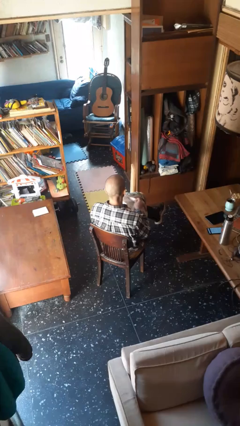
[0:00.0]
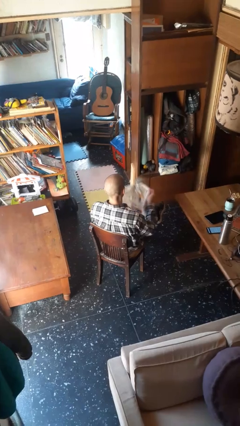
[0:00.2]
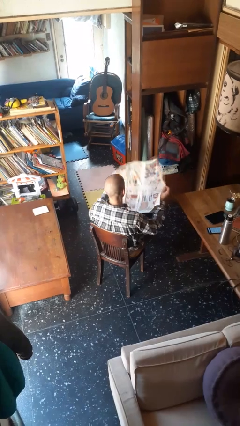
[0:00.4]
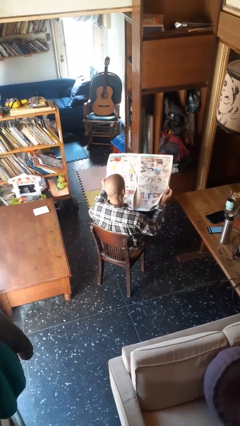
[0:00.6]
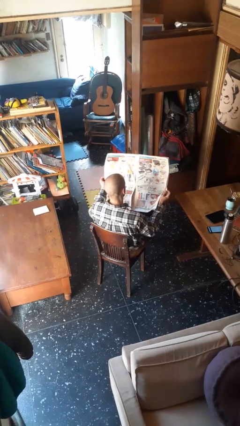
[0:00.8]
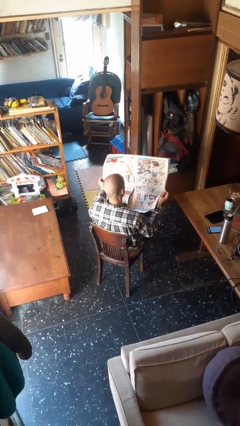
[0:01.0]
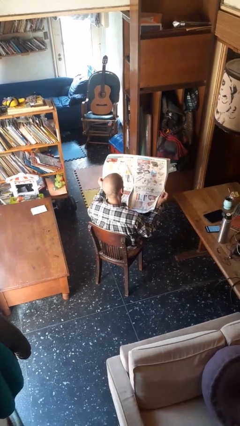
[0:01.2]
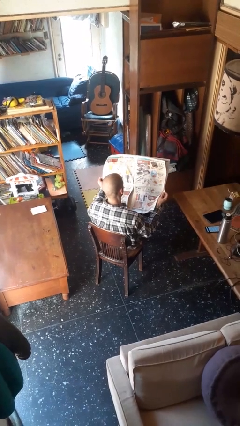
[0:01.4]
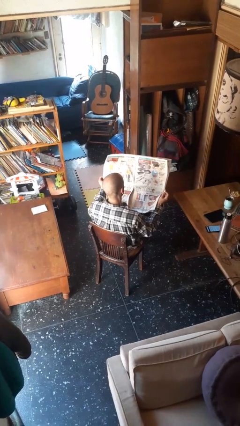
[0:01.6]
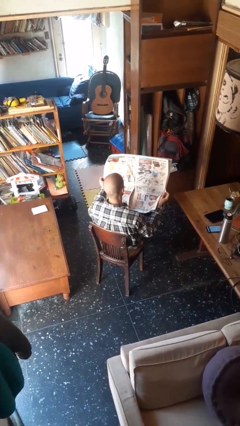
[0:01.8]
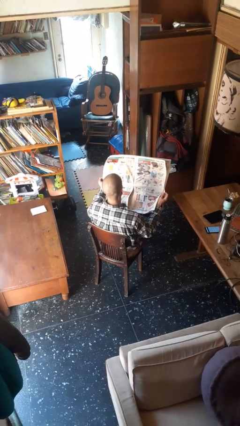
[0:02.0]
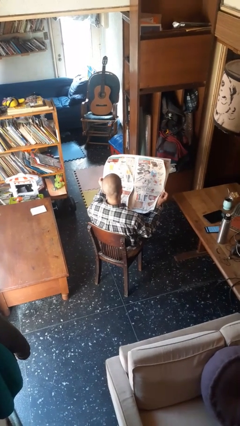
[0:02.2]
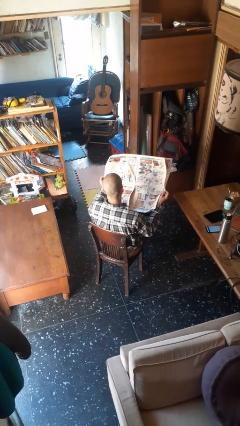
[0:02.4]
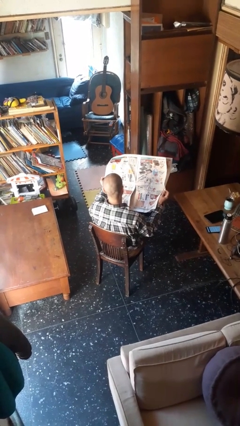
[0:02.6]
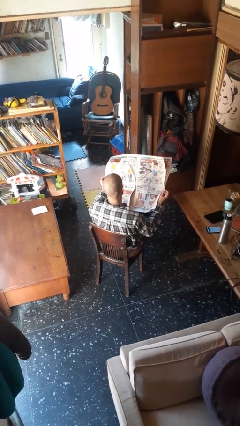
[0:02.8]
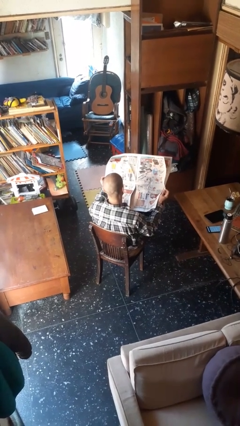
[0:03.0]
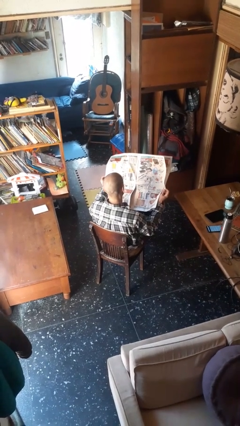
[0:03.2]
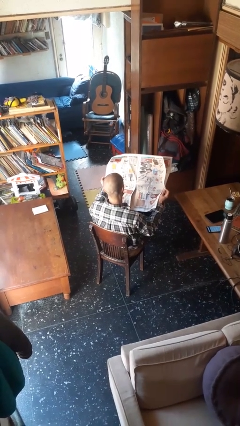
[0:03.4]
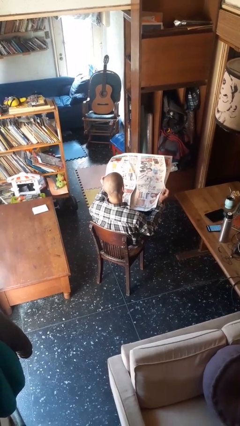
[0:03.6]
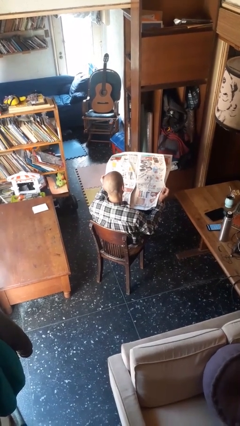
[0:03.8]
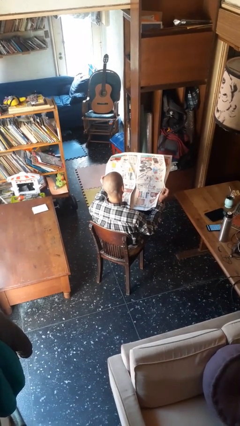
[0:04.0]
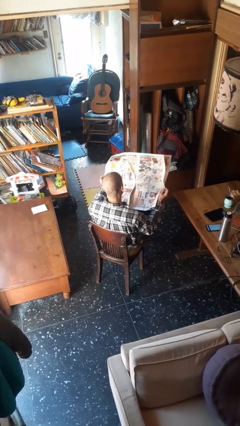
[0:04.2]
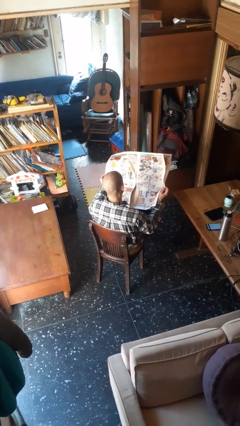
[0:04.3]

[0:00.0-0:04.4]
person reads newspaper

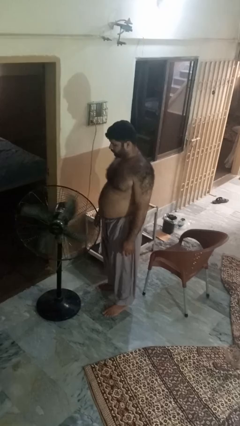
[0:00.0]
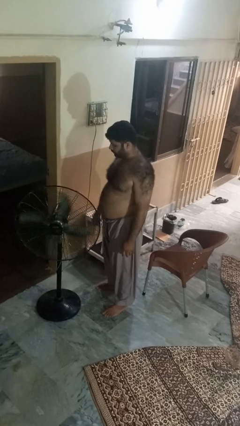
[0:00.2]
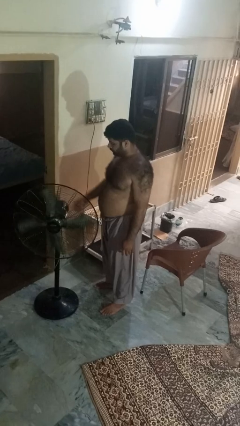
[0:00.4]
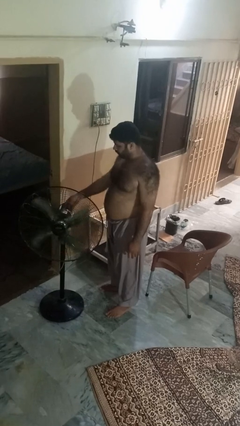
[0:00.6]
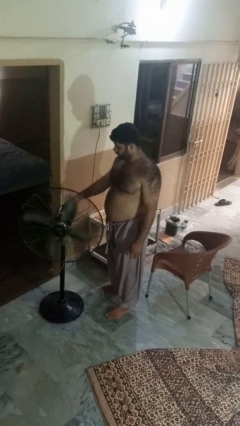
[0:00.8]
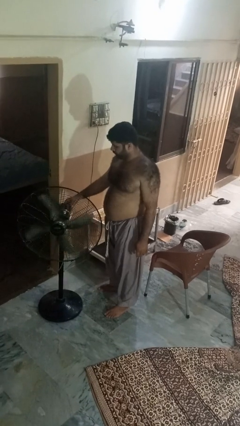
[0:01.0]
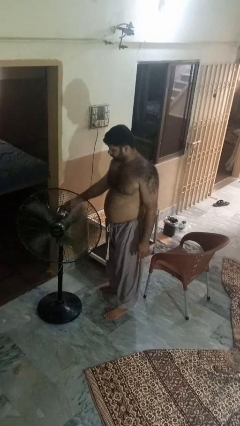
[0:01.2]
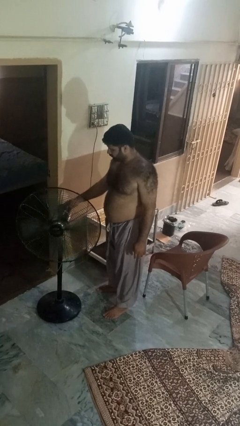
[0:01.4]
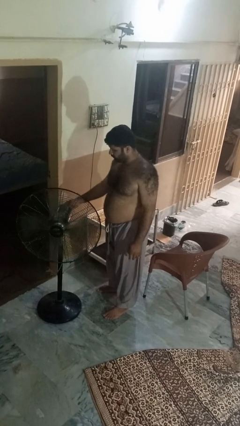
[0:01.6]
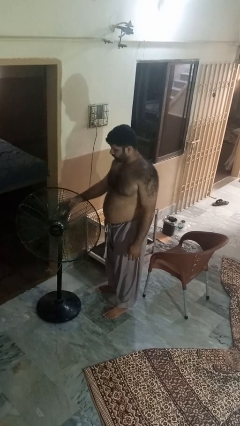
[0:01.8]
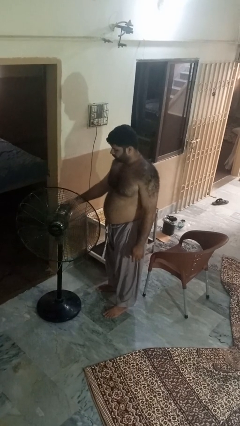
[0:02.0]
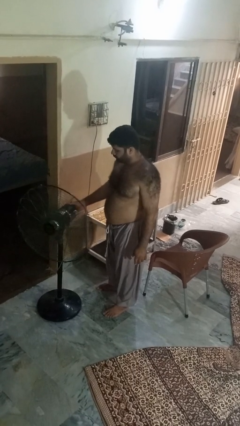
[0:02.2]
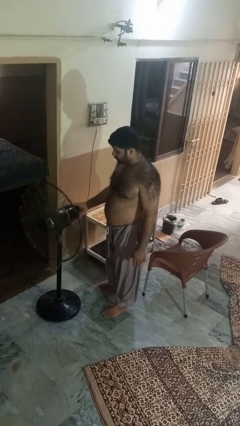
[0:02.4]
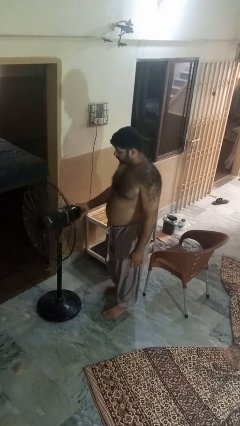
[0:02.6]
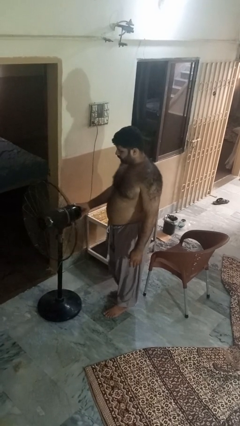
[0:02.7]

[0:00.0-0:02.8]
person turns on fan

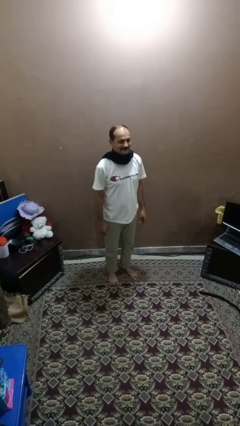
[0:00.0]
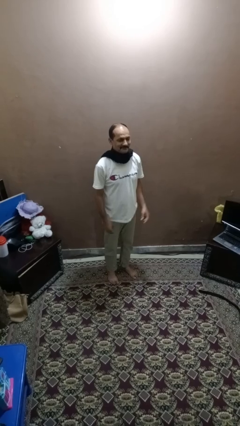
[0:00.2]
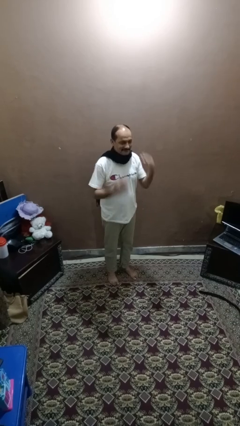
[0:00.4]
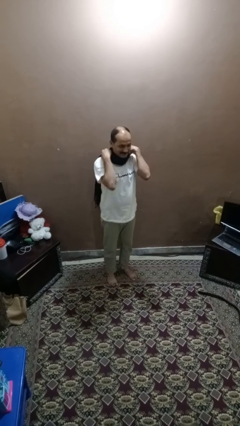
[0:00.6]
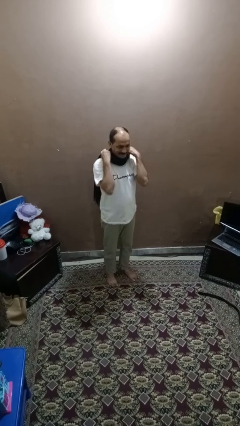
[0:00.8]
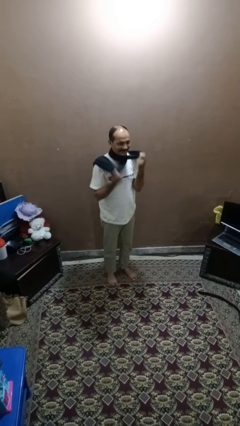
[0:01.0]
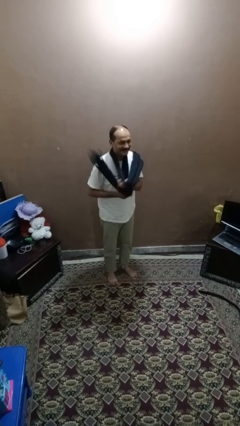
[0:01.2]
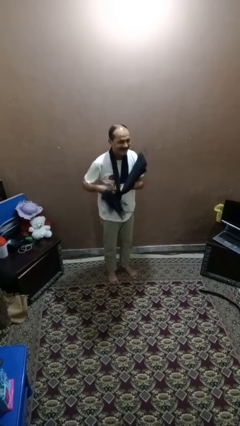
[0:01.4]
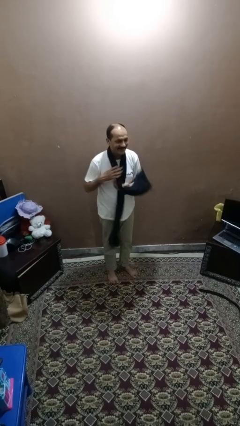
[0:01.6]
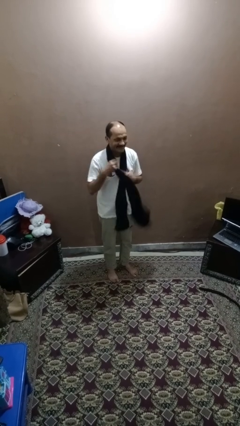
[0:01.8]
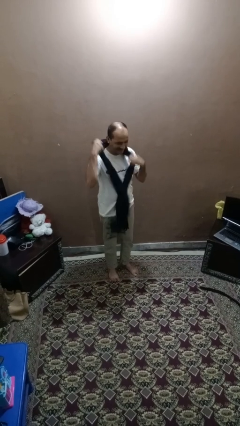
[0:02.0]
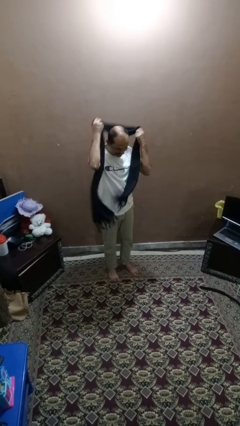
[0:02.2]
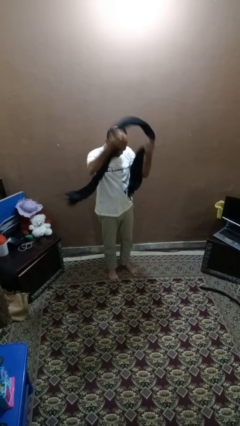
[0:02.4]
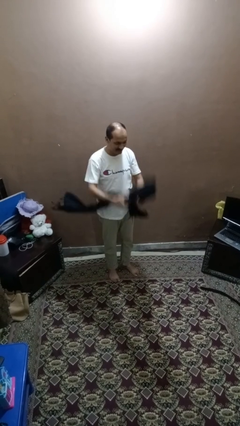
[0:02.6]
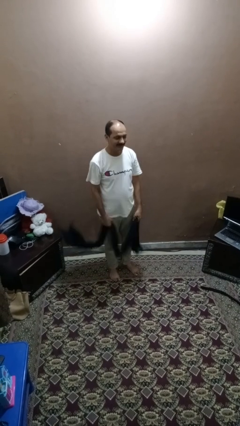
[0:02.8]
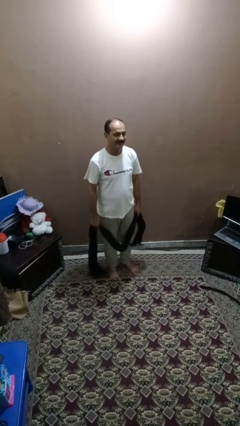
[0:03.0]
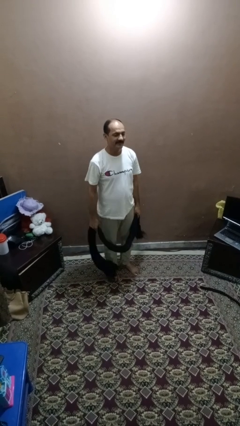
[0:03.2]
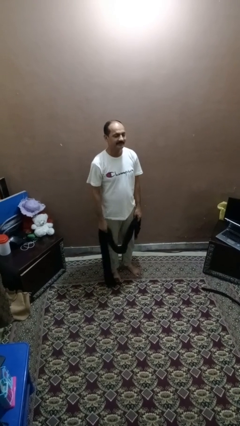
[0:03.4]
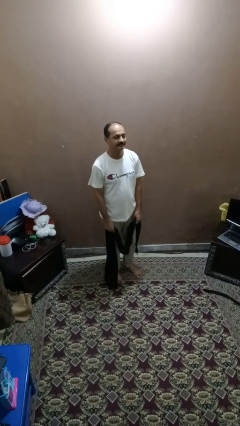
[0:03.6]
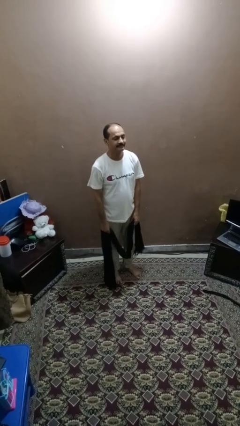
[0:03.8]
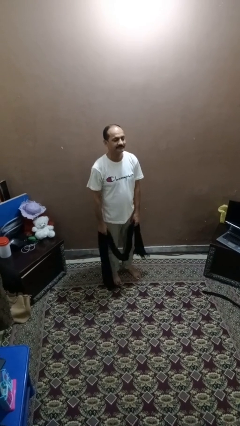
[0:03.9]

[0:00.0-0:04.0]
person takes off scarf

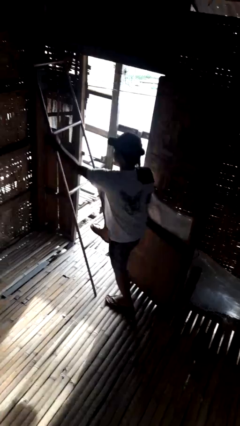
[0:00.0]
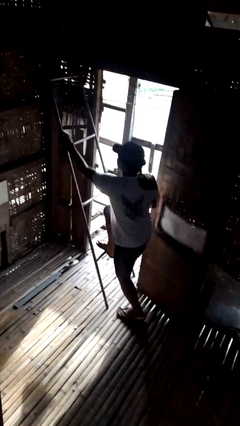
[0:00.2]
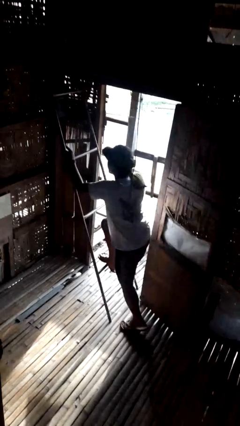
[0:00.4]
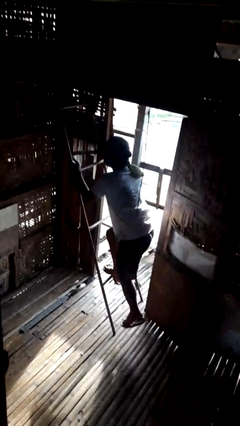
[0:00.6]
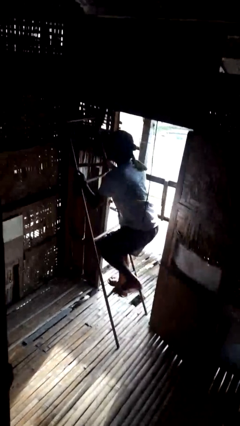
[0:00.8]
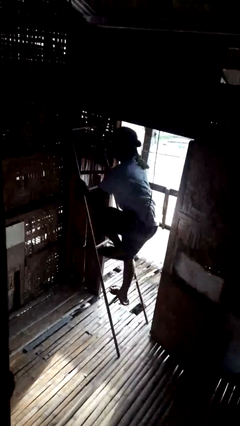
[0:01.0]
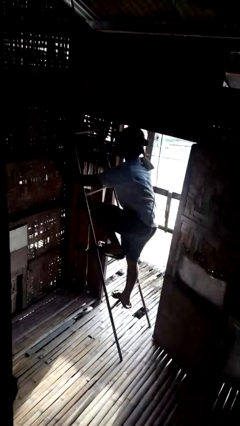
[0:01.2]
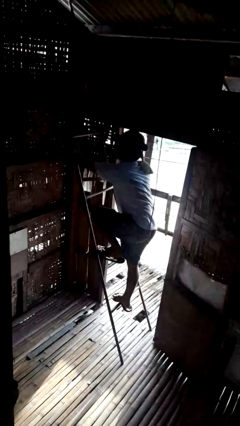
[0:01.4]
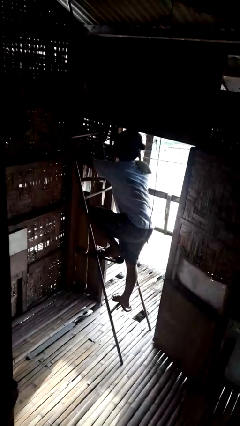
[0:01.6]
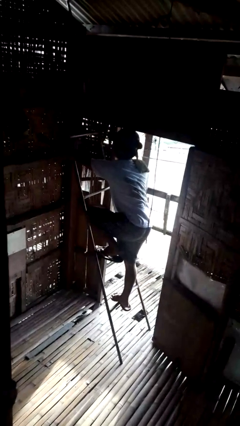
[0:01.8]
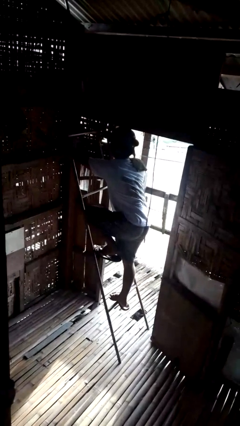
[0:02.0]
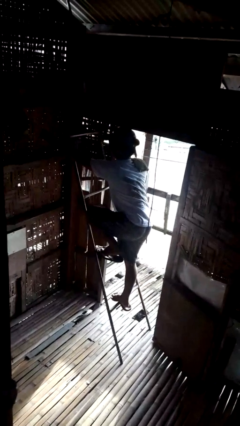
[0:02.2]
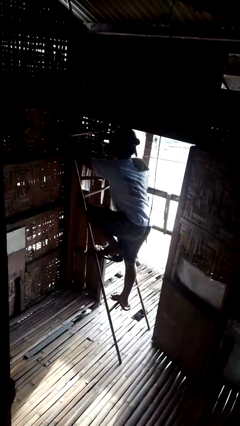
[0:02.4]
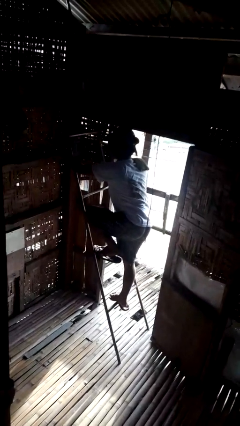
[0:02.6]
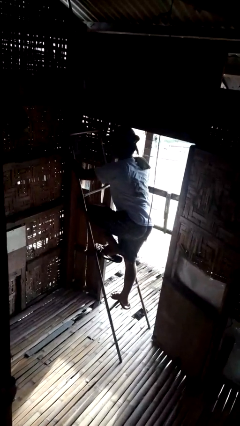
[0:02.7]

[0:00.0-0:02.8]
person climbs up ladder

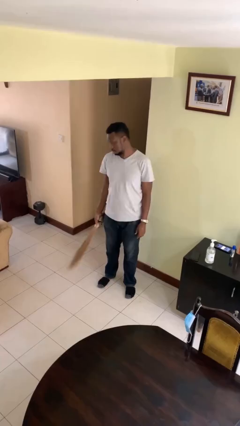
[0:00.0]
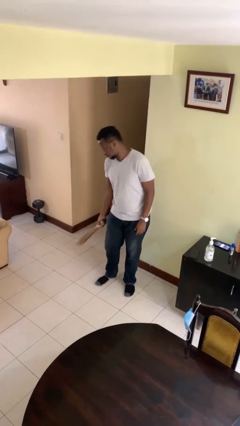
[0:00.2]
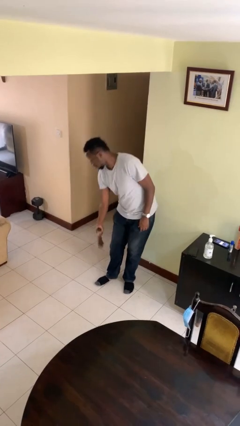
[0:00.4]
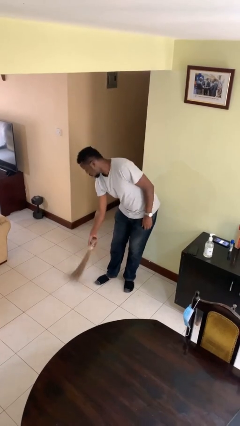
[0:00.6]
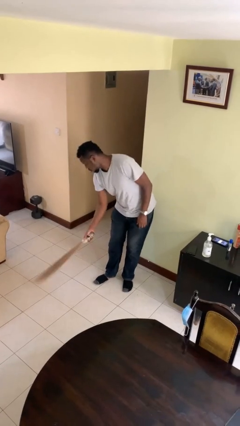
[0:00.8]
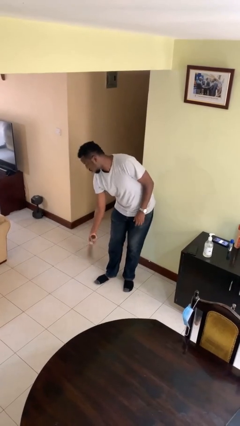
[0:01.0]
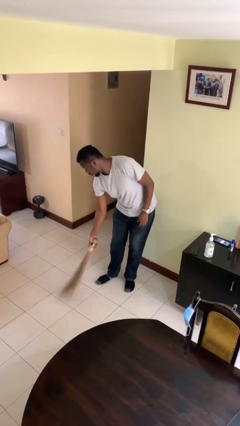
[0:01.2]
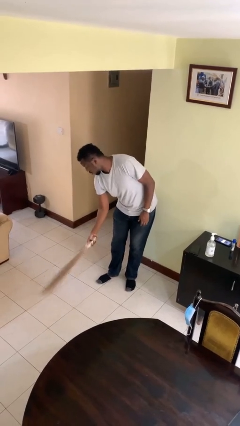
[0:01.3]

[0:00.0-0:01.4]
person sweeps floor

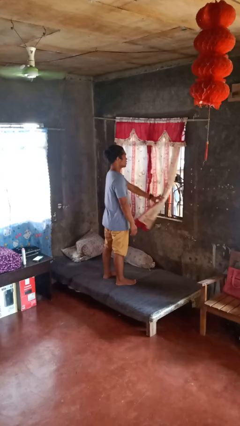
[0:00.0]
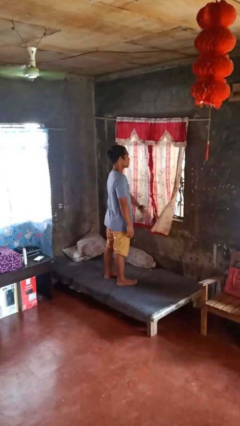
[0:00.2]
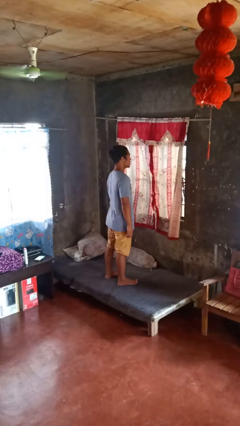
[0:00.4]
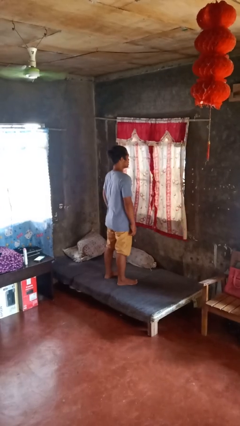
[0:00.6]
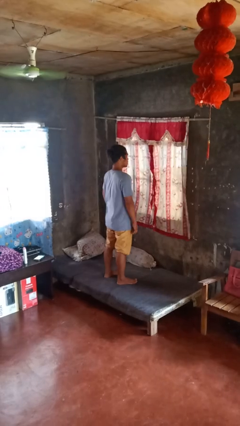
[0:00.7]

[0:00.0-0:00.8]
person closes curtains

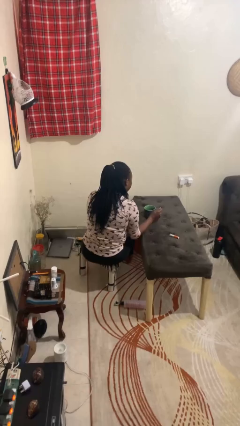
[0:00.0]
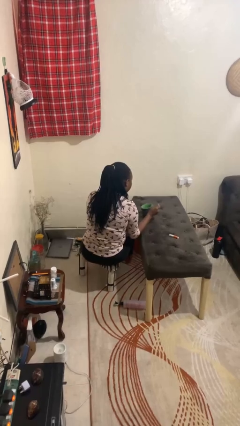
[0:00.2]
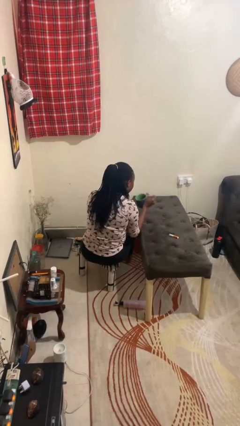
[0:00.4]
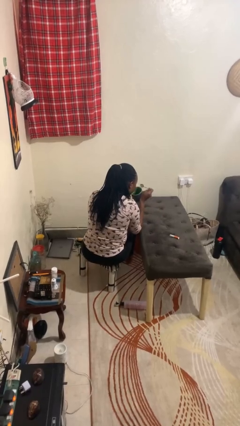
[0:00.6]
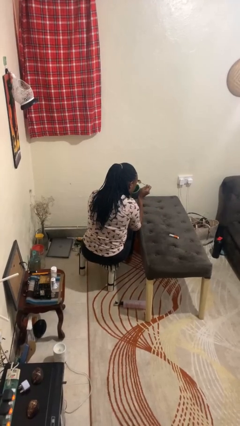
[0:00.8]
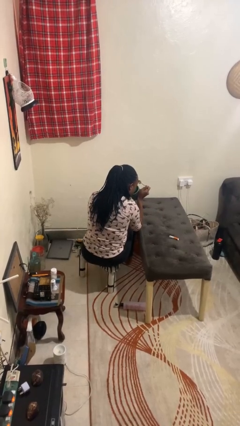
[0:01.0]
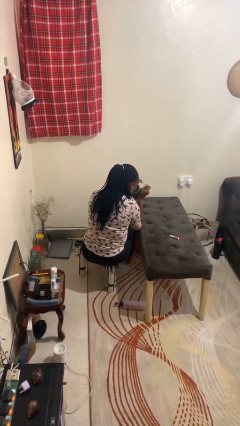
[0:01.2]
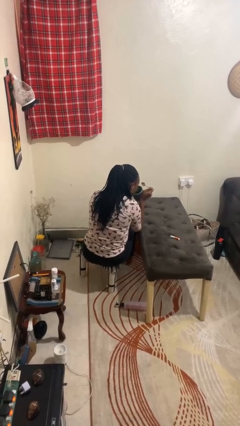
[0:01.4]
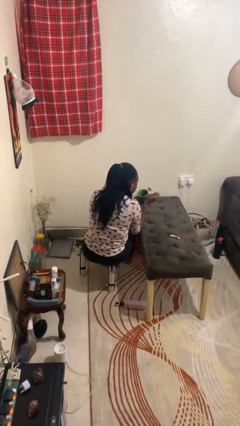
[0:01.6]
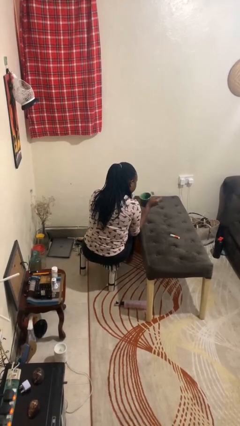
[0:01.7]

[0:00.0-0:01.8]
person drinks from mug
